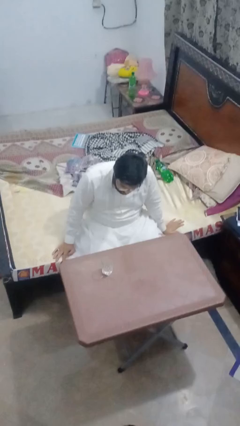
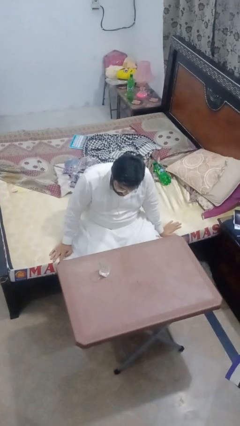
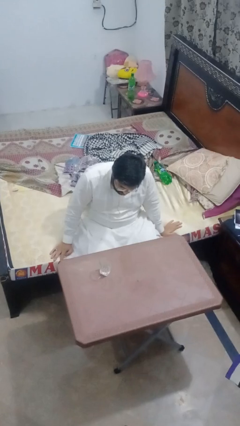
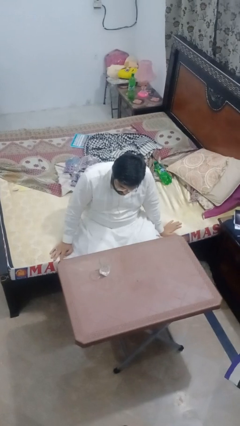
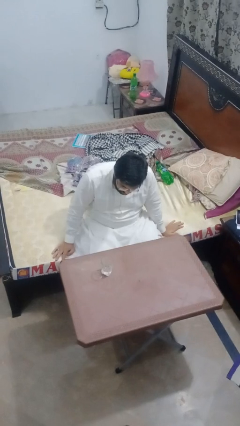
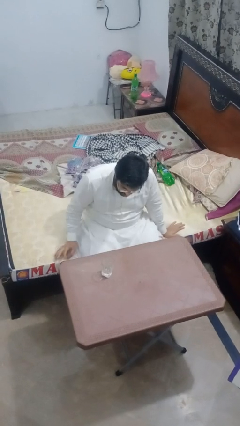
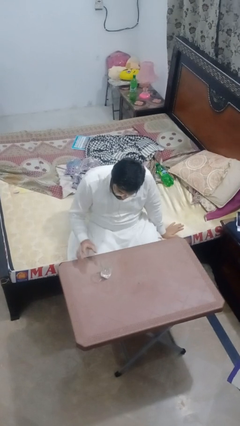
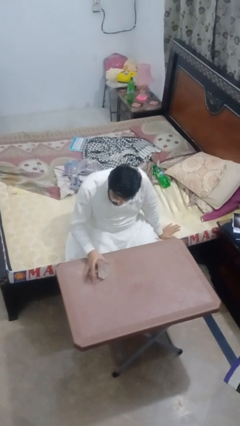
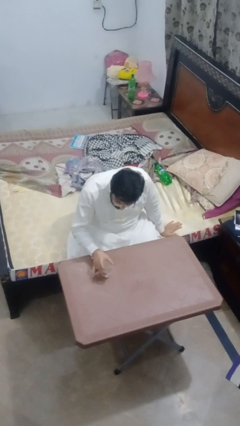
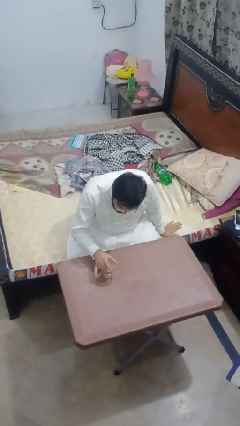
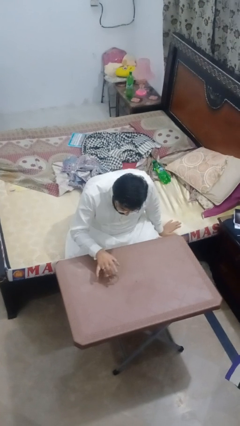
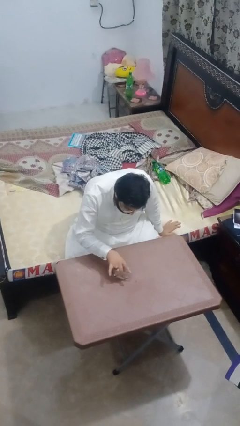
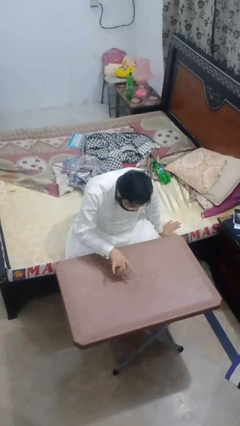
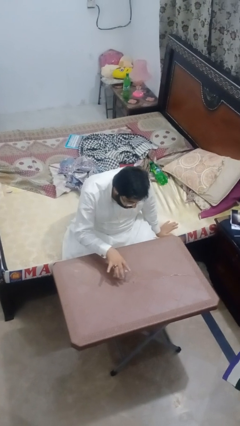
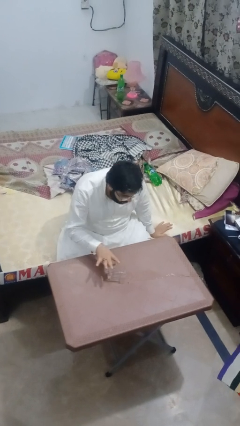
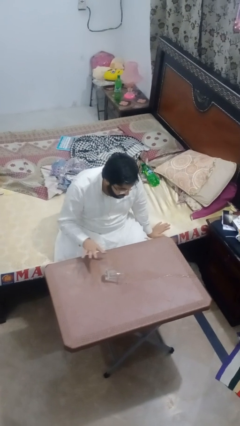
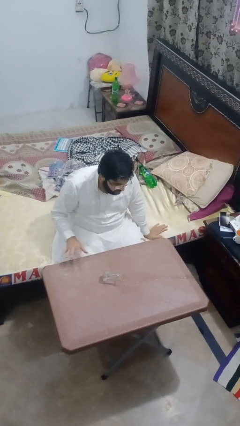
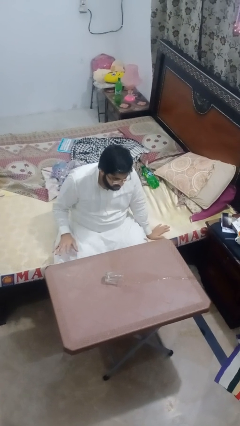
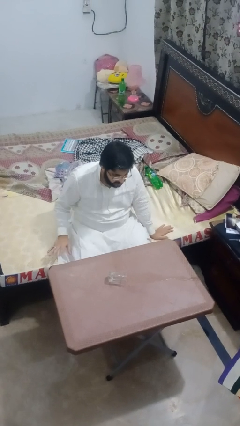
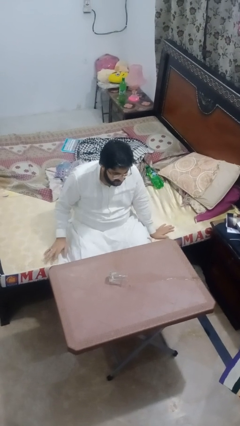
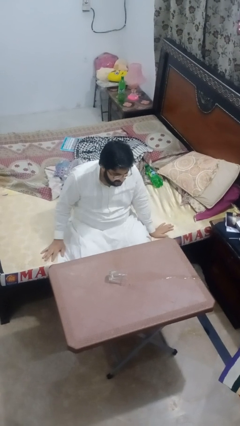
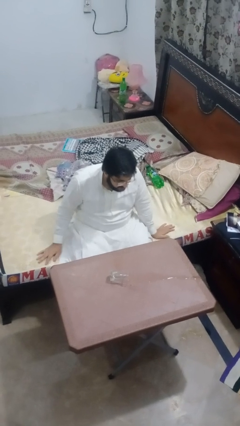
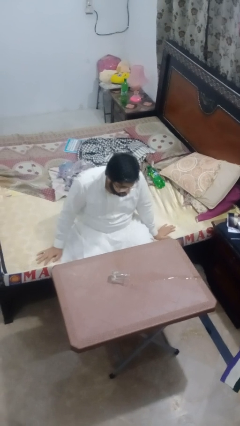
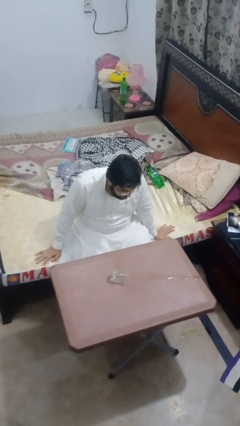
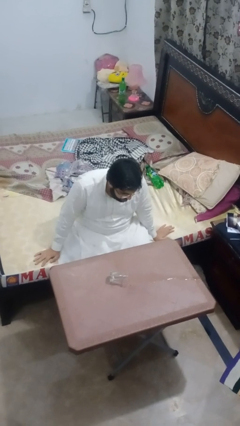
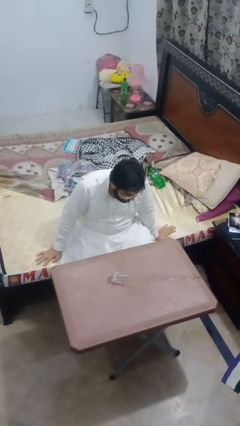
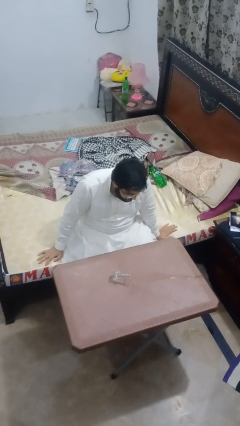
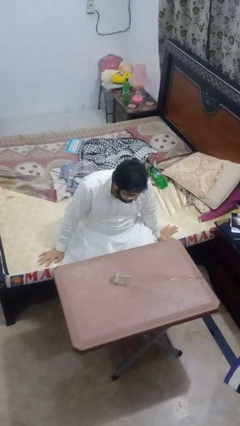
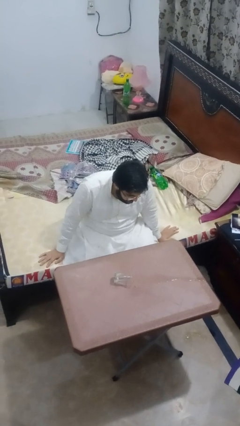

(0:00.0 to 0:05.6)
person spills on table

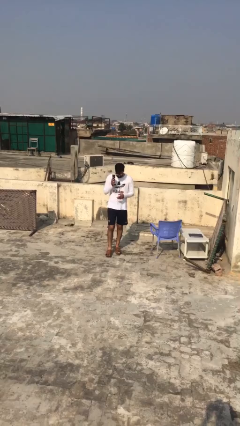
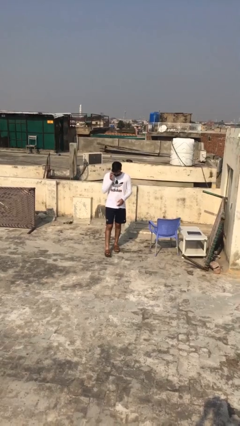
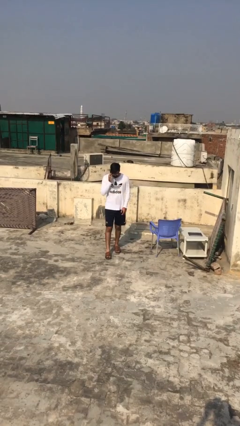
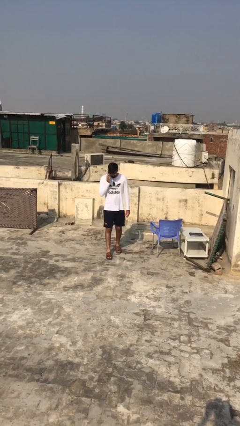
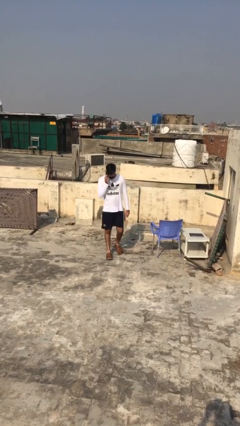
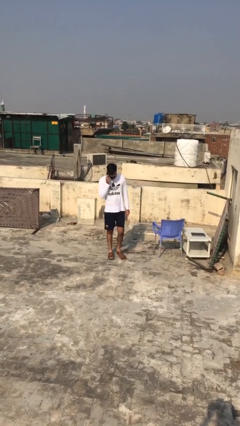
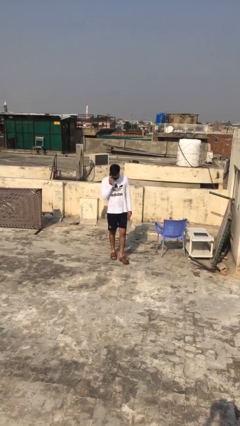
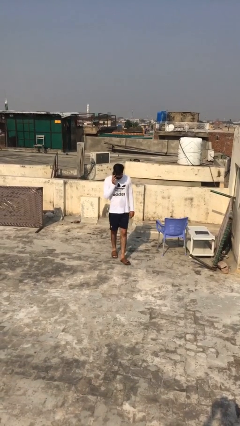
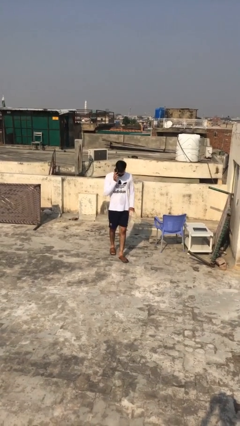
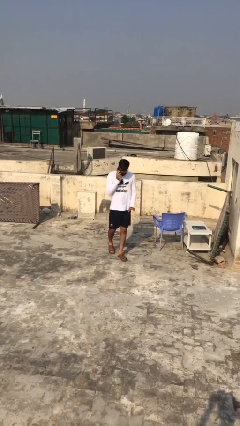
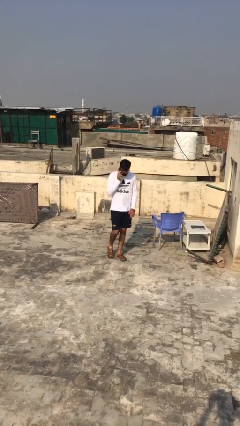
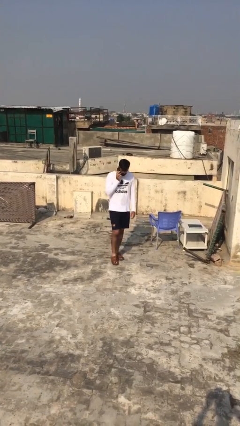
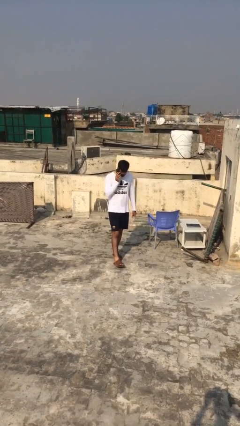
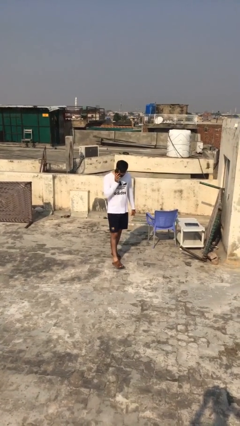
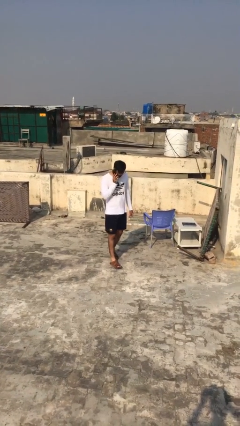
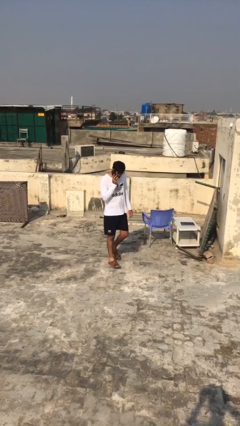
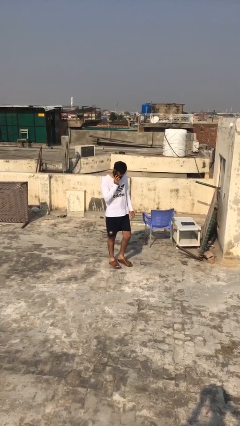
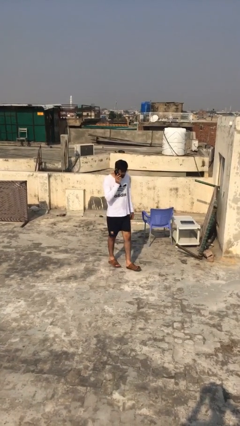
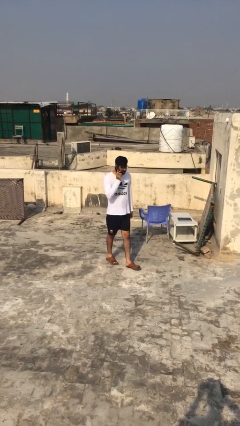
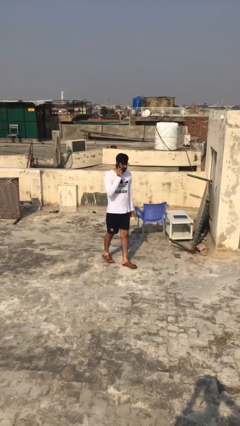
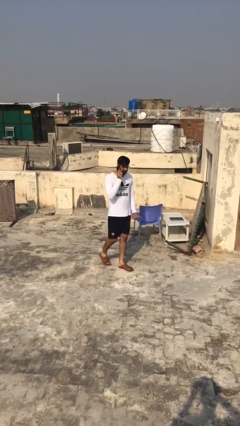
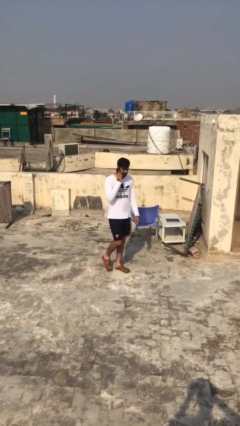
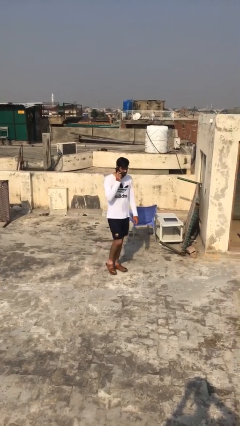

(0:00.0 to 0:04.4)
person talks on phone

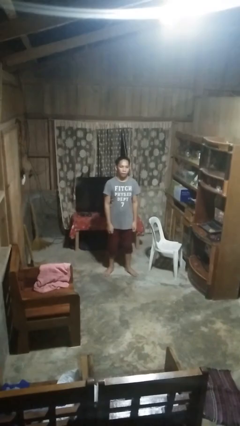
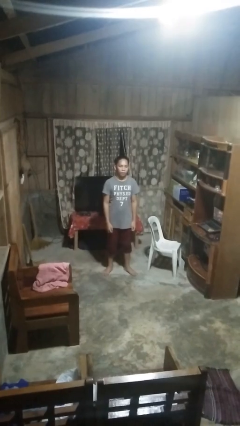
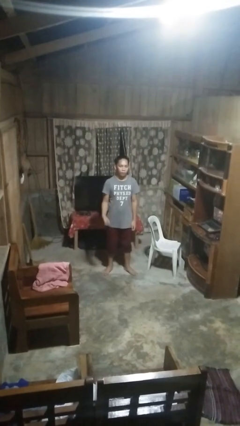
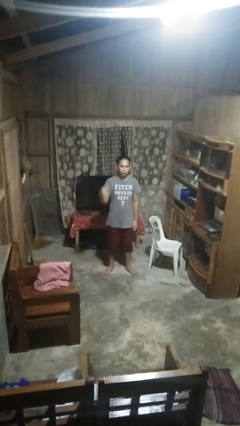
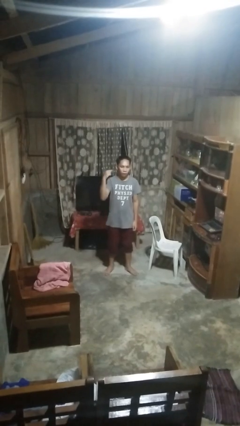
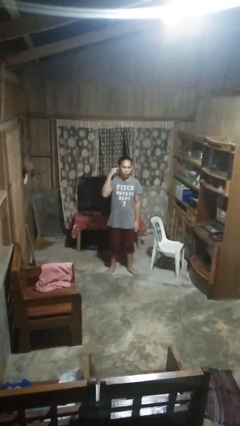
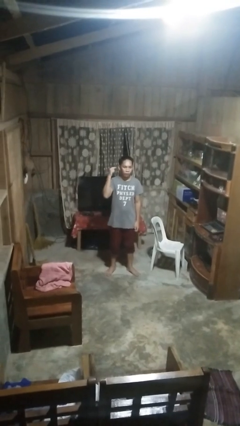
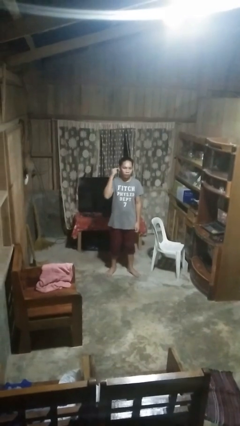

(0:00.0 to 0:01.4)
person gestures listen closely

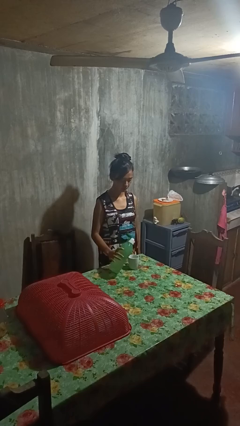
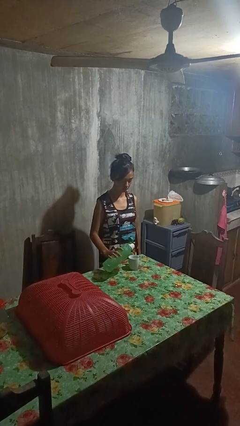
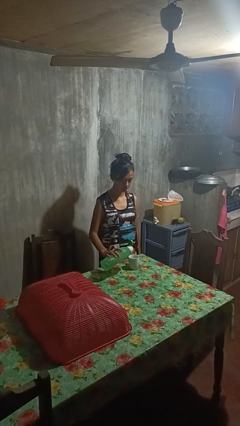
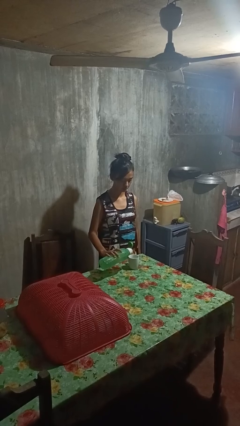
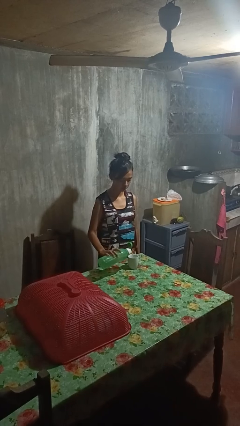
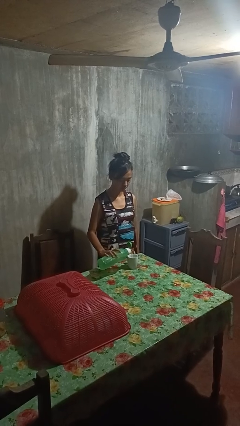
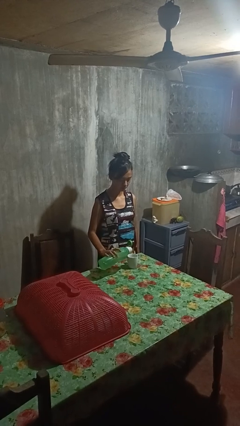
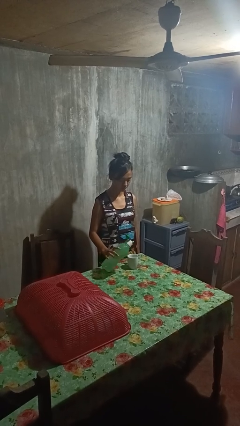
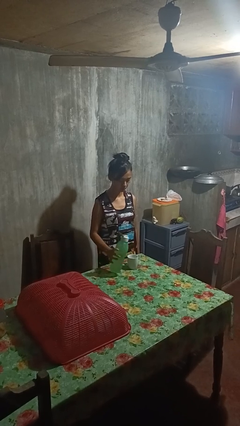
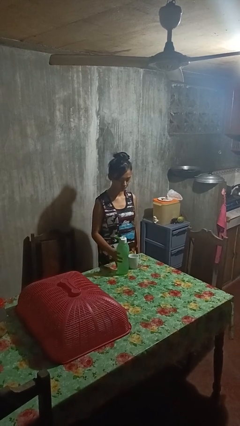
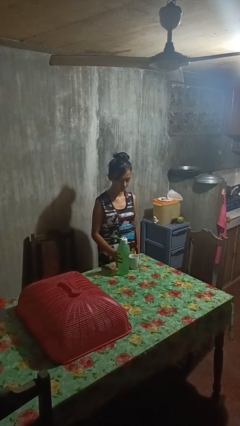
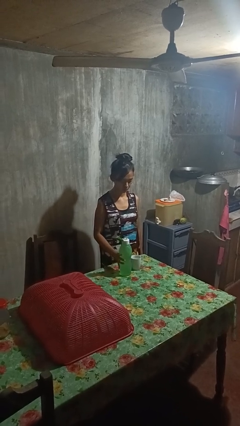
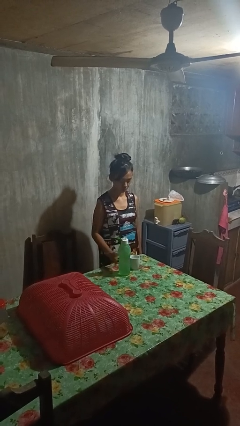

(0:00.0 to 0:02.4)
person pours liquid into cup

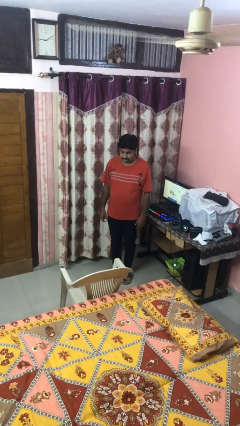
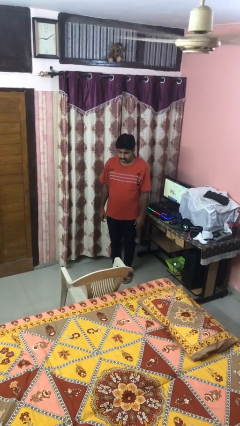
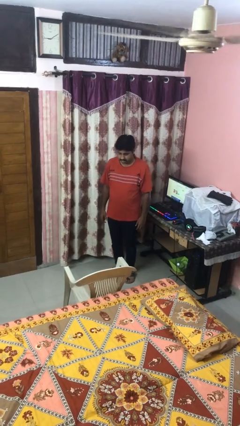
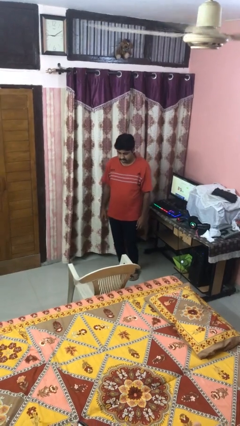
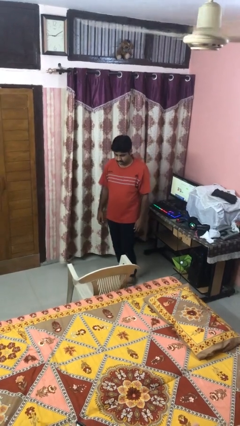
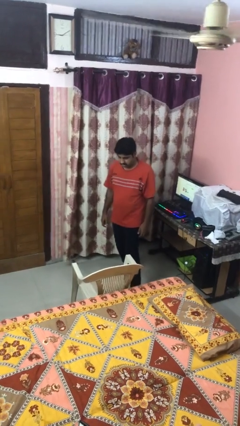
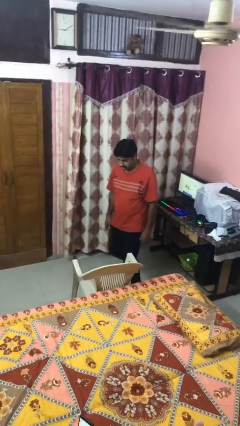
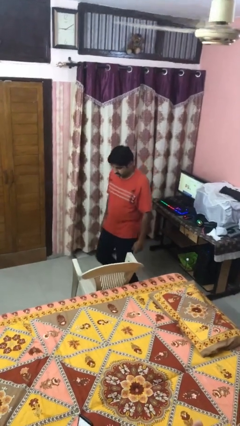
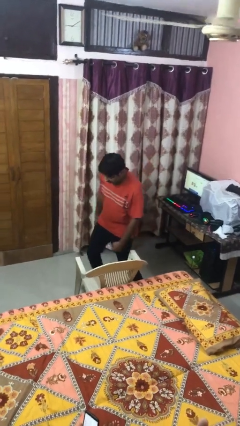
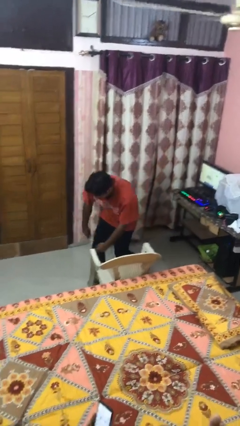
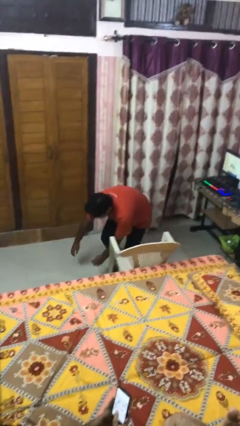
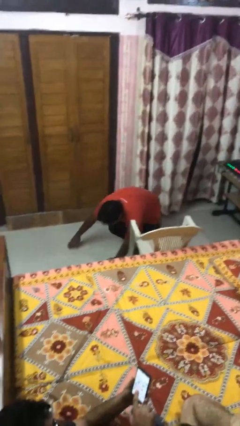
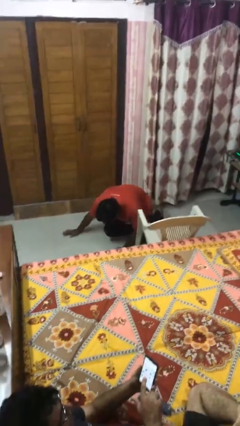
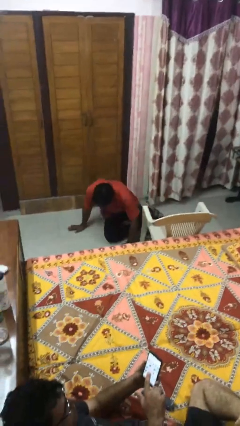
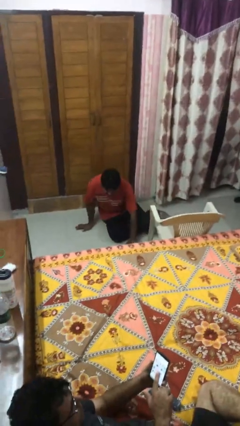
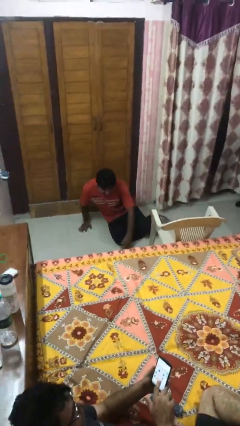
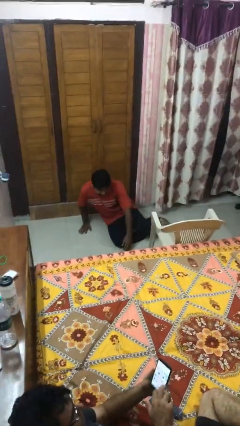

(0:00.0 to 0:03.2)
person trips on object on floor

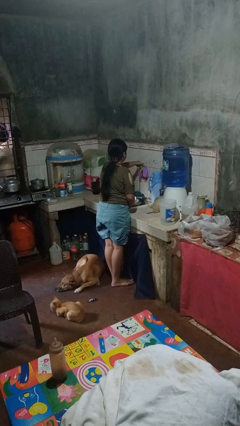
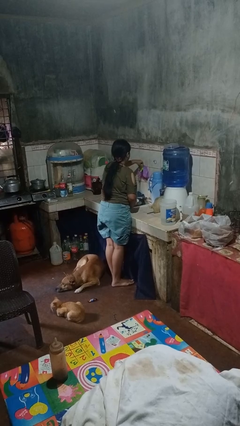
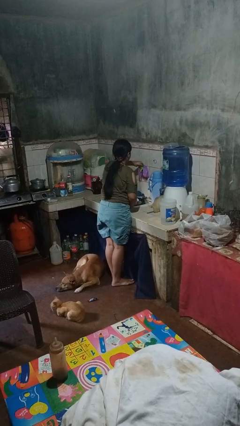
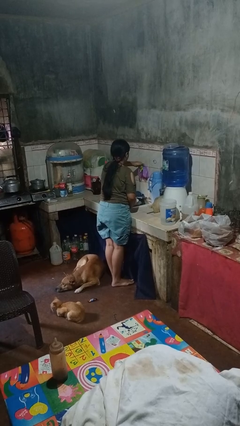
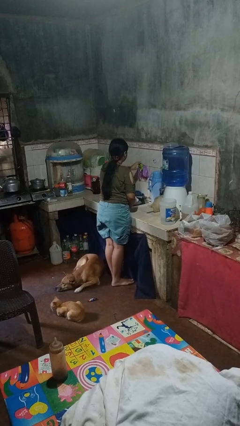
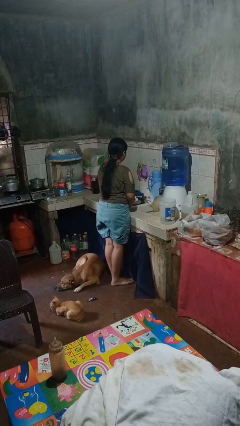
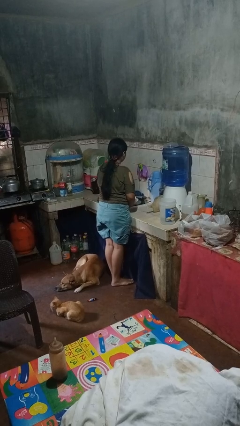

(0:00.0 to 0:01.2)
person turns off faucet
